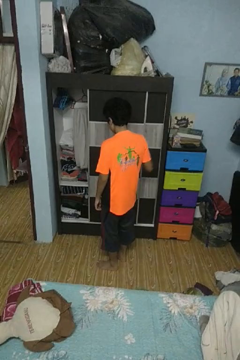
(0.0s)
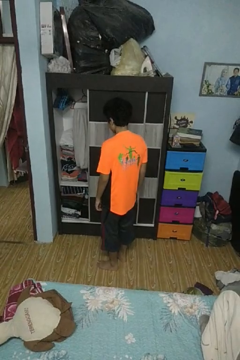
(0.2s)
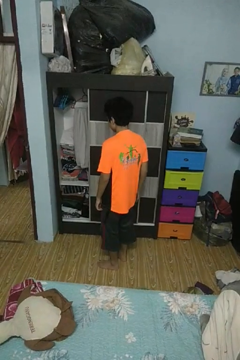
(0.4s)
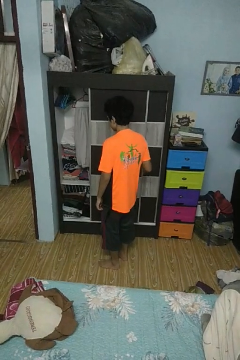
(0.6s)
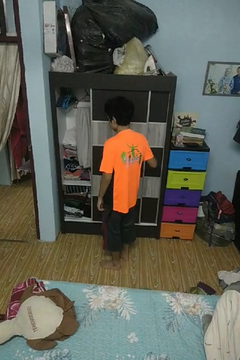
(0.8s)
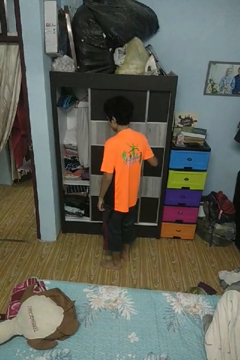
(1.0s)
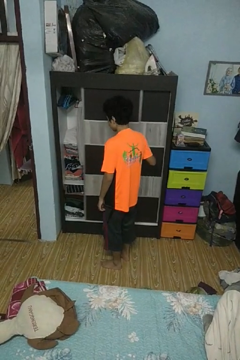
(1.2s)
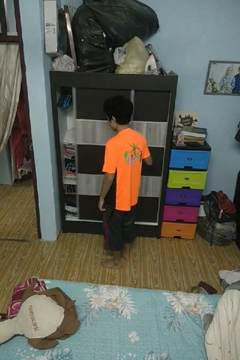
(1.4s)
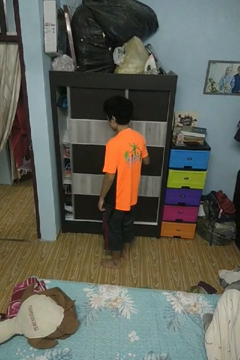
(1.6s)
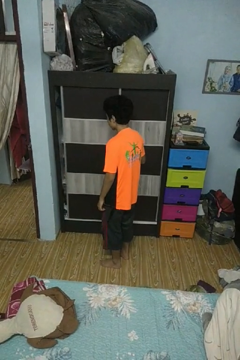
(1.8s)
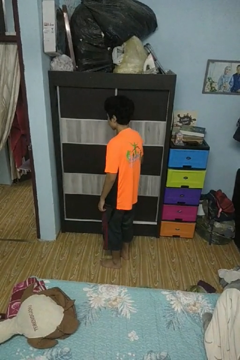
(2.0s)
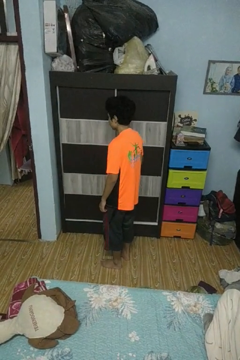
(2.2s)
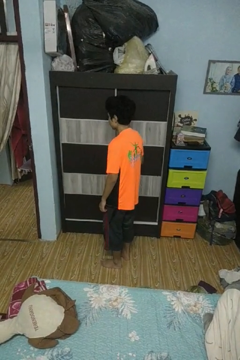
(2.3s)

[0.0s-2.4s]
person closes closet door

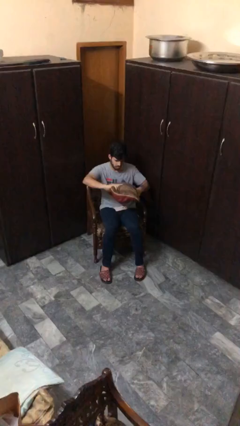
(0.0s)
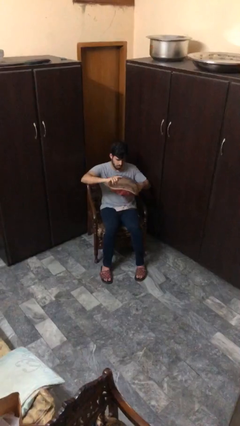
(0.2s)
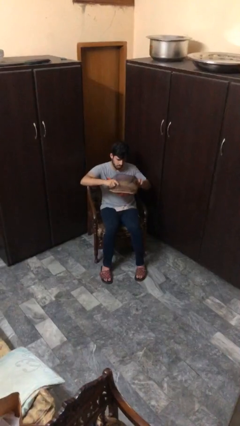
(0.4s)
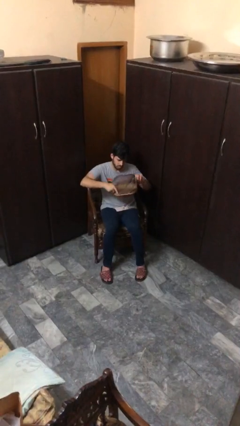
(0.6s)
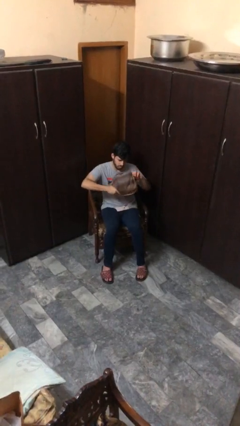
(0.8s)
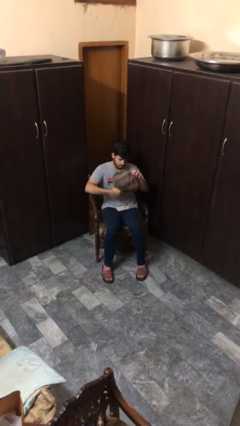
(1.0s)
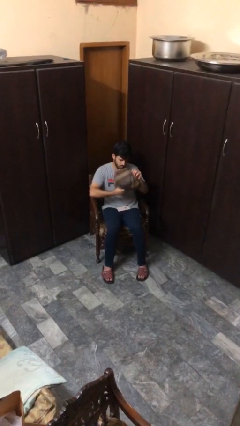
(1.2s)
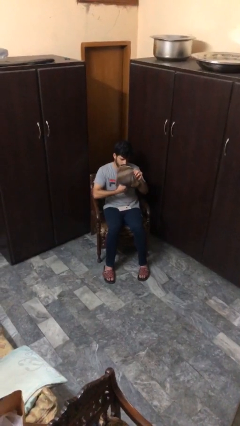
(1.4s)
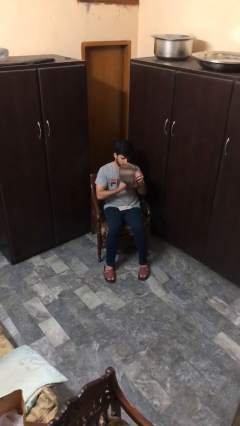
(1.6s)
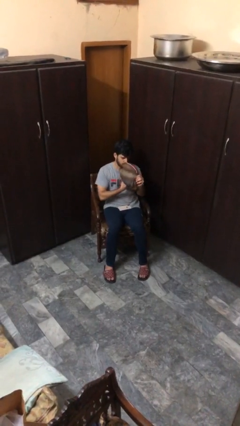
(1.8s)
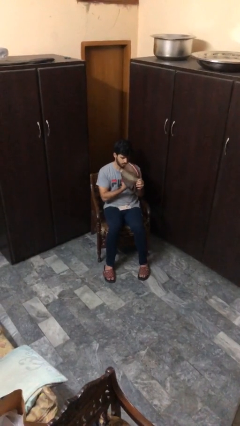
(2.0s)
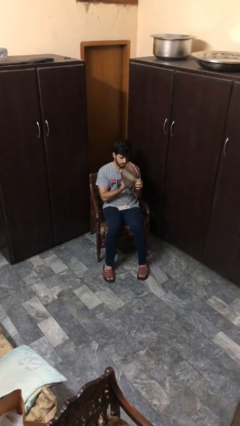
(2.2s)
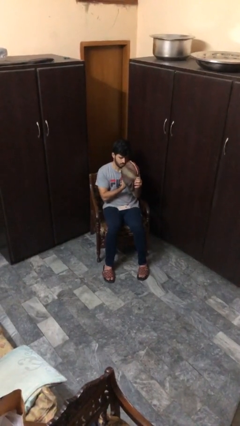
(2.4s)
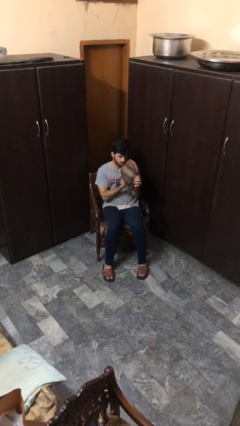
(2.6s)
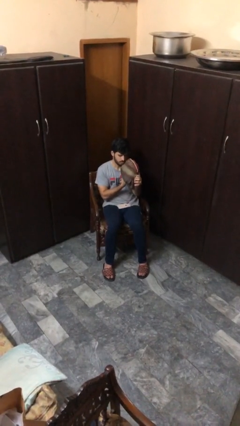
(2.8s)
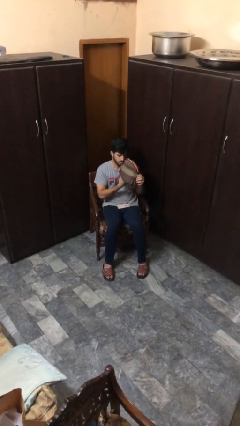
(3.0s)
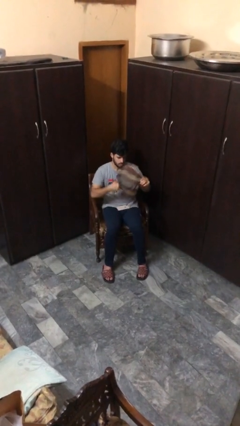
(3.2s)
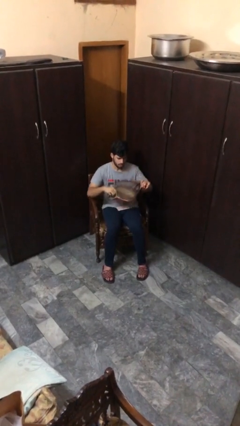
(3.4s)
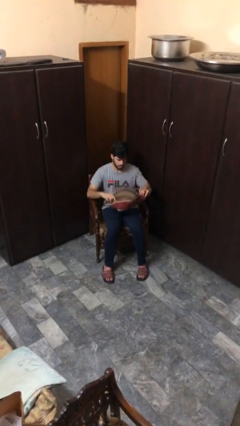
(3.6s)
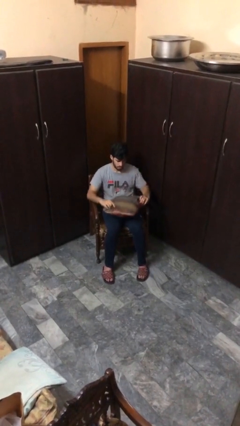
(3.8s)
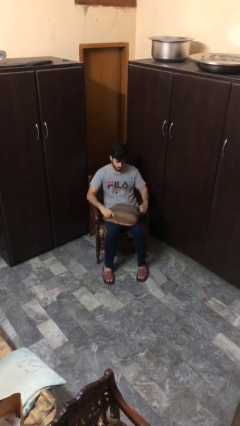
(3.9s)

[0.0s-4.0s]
person squeezes object

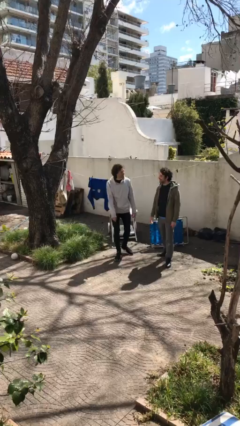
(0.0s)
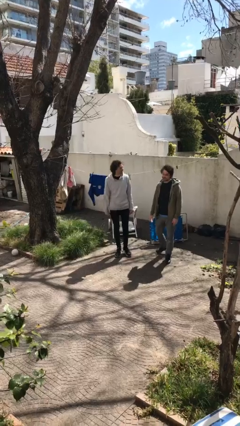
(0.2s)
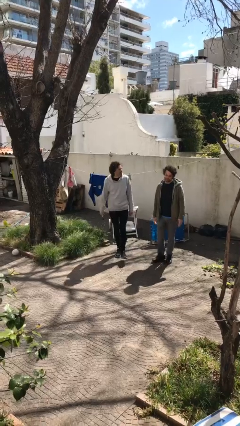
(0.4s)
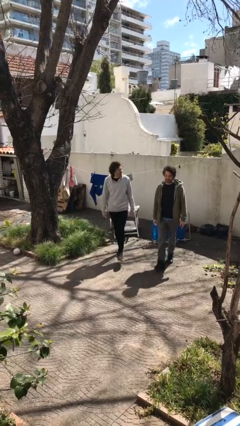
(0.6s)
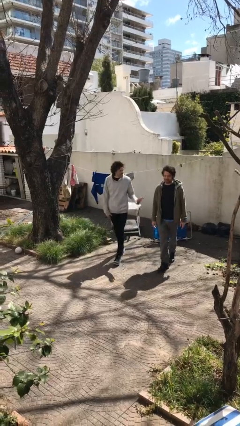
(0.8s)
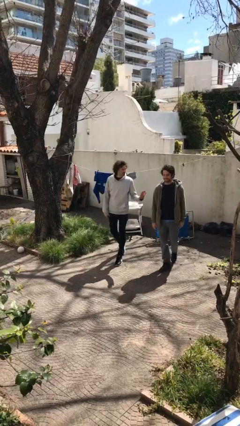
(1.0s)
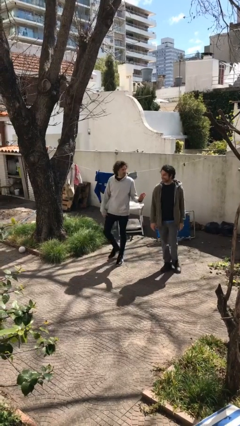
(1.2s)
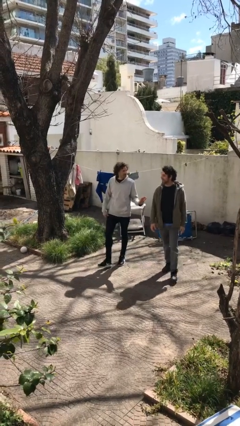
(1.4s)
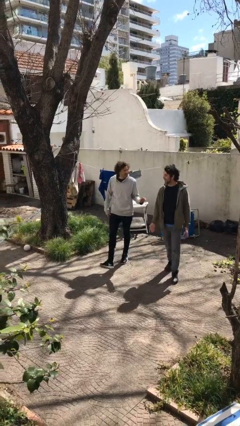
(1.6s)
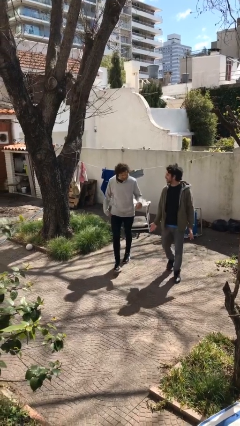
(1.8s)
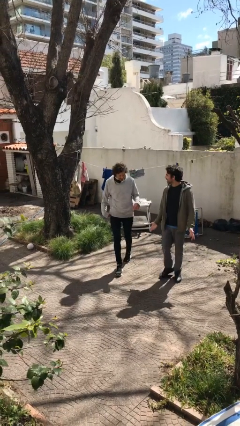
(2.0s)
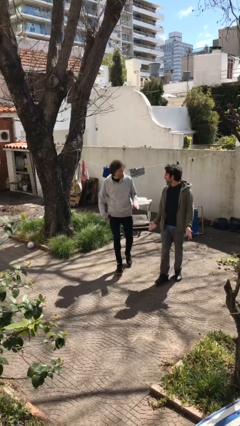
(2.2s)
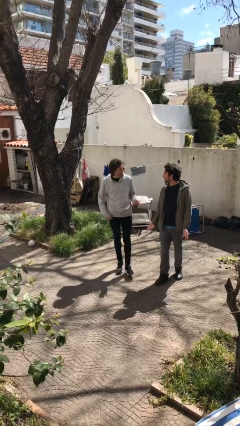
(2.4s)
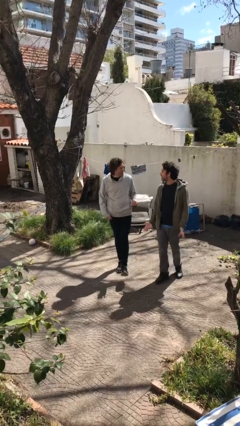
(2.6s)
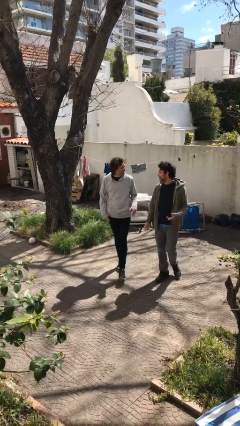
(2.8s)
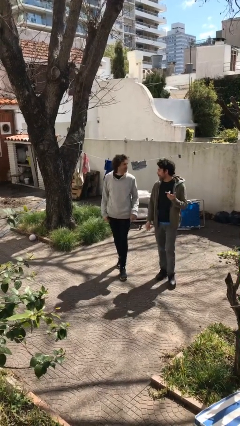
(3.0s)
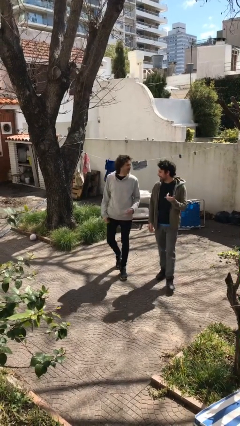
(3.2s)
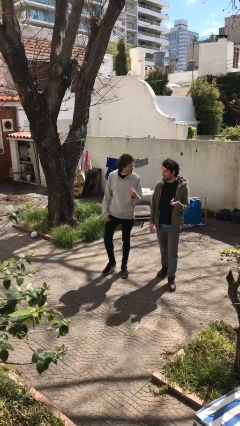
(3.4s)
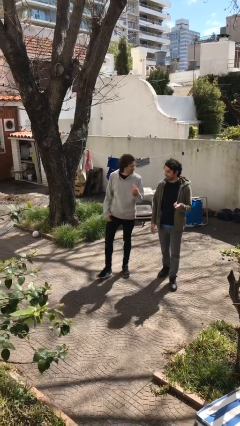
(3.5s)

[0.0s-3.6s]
person talks to person

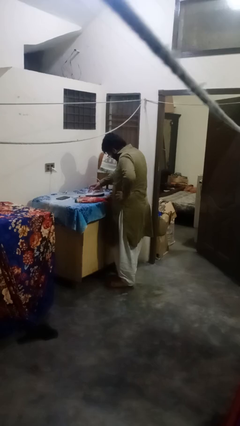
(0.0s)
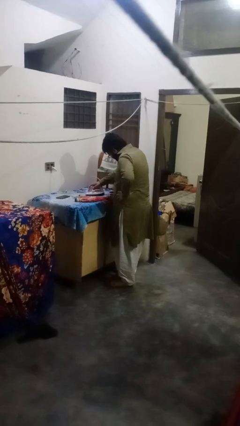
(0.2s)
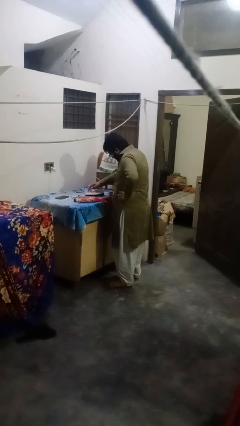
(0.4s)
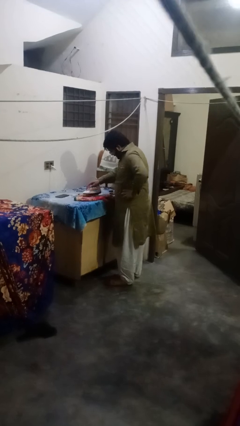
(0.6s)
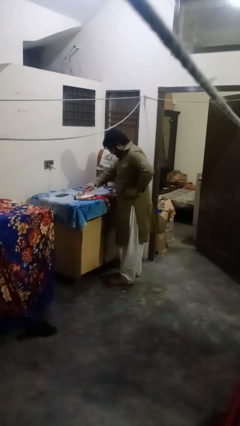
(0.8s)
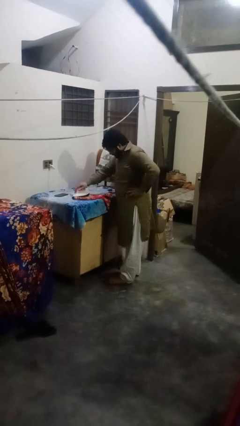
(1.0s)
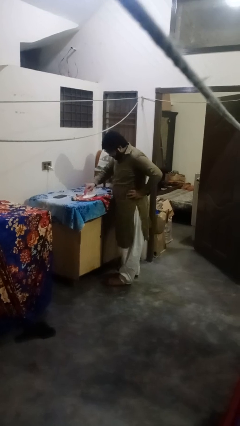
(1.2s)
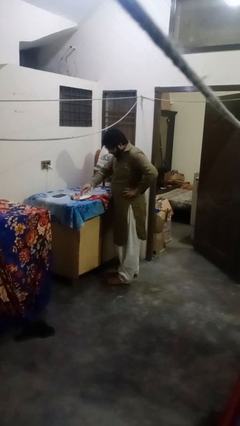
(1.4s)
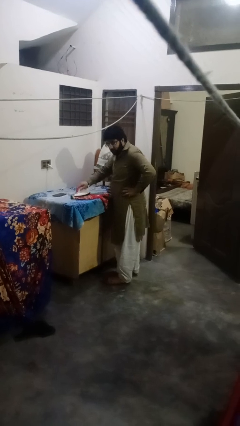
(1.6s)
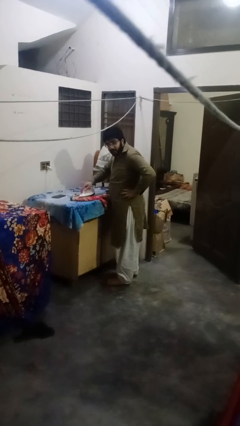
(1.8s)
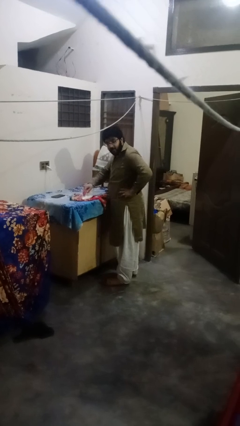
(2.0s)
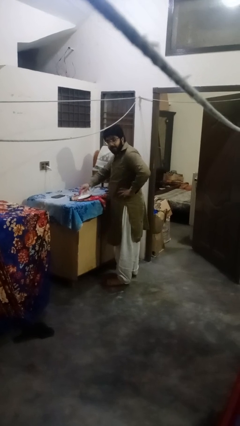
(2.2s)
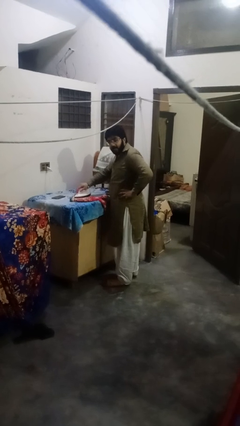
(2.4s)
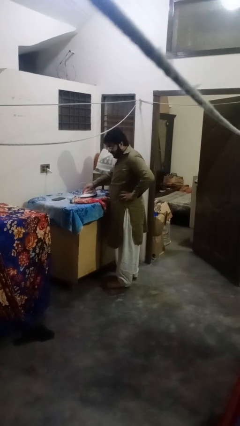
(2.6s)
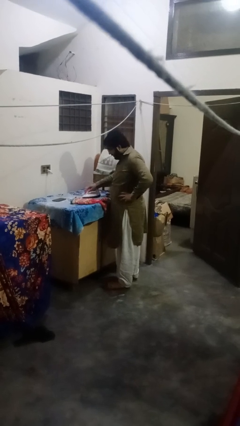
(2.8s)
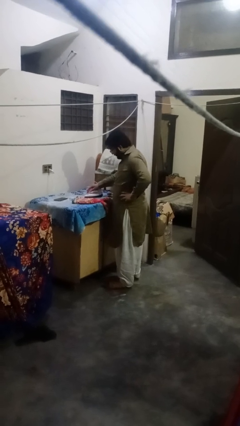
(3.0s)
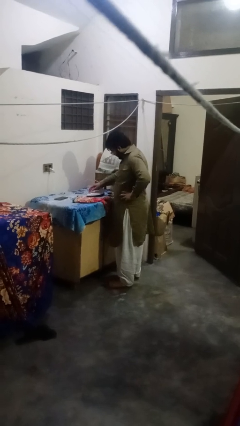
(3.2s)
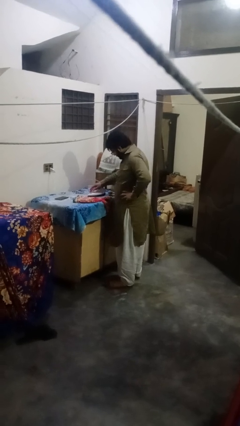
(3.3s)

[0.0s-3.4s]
person irons clothes

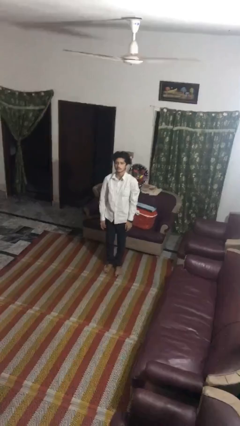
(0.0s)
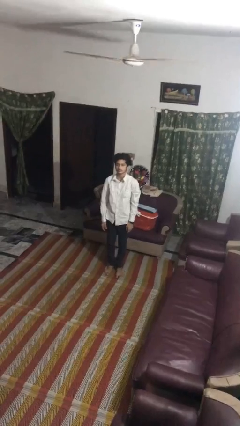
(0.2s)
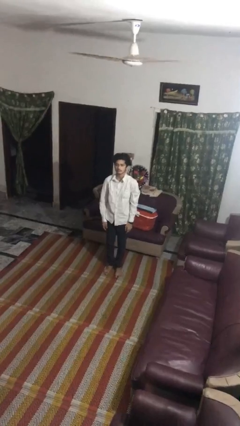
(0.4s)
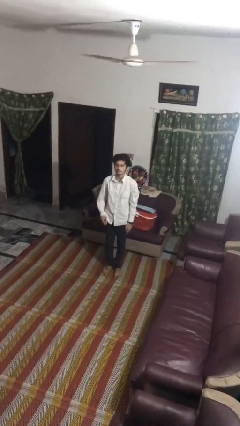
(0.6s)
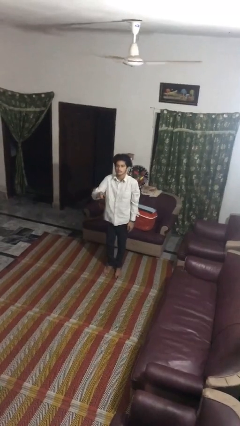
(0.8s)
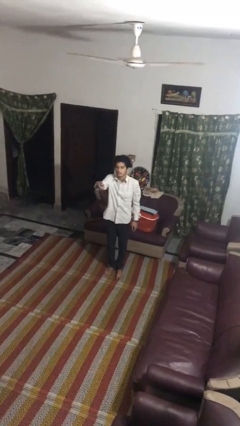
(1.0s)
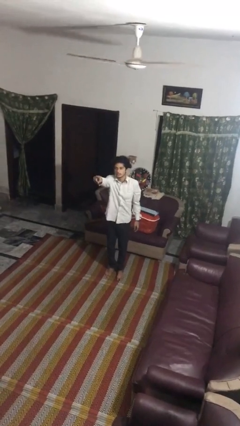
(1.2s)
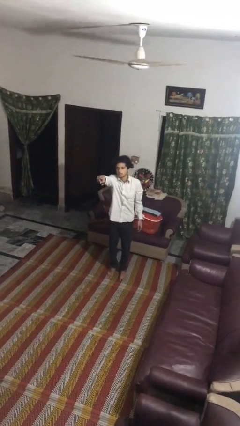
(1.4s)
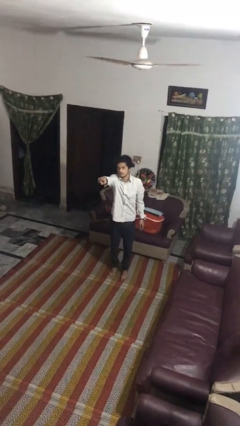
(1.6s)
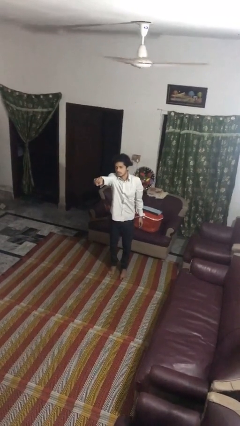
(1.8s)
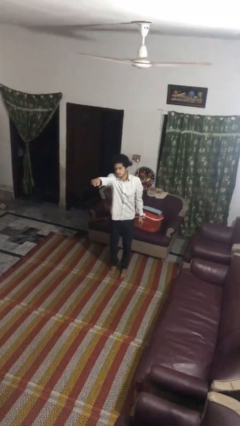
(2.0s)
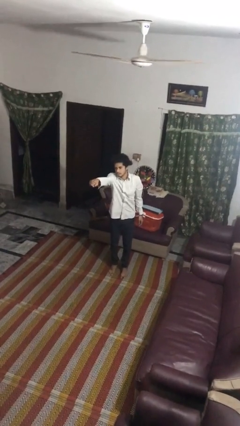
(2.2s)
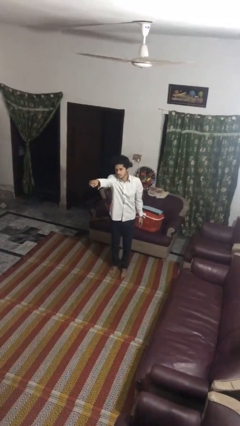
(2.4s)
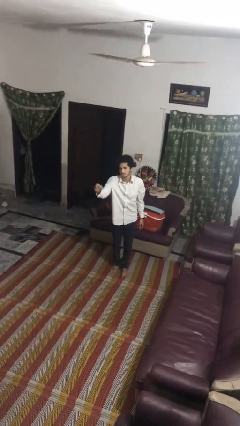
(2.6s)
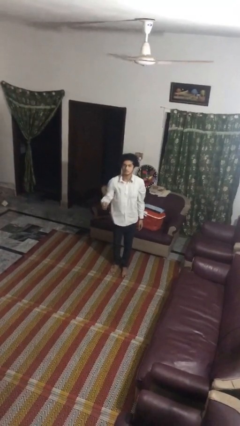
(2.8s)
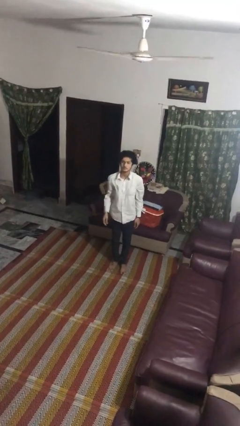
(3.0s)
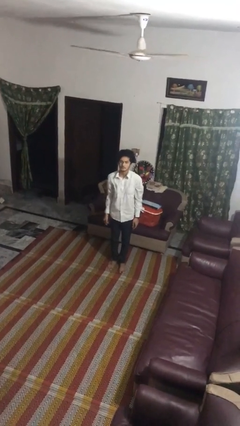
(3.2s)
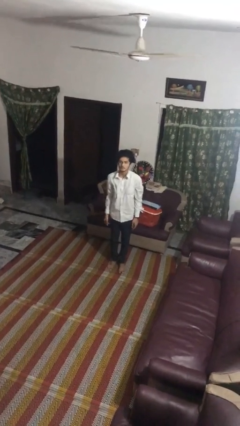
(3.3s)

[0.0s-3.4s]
person points at person

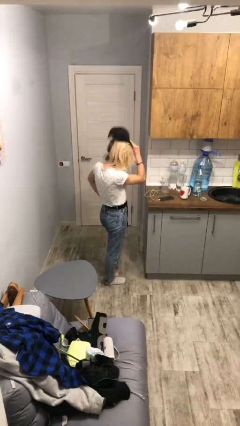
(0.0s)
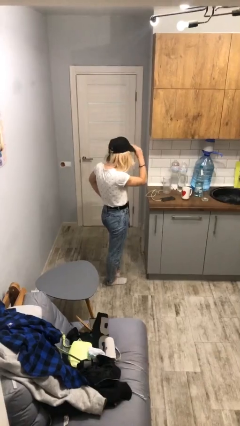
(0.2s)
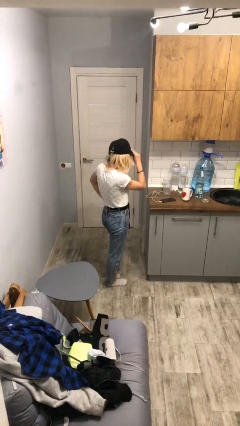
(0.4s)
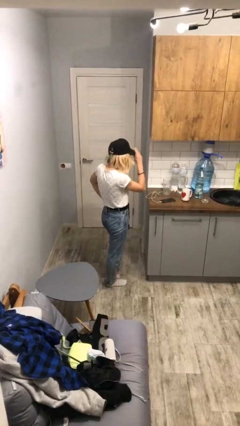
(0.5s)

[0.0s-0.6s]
person puts on hat

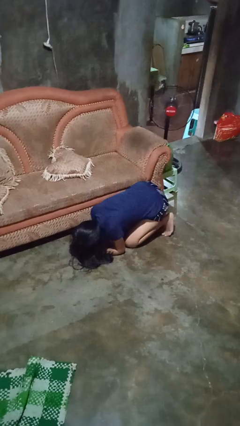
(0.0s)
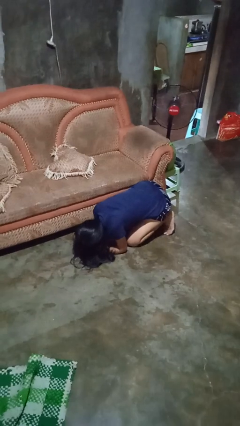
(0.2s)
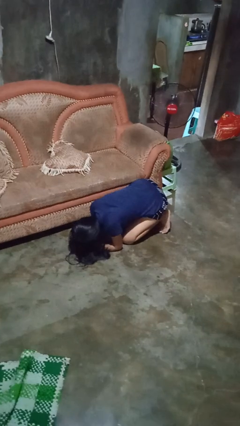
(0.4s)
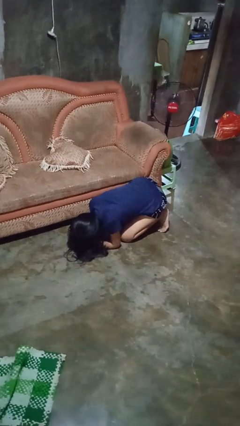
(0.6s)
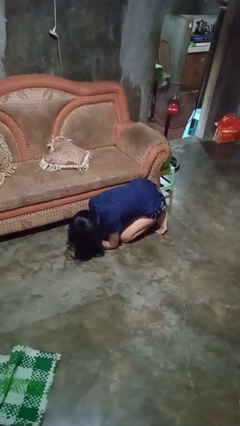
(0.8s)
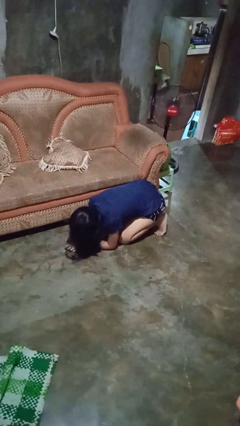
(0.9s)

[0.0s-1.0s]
person searches under couch
